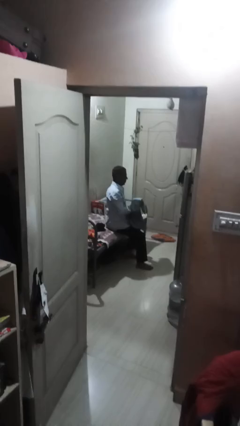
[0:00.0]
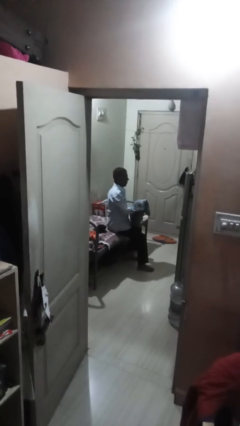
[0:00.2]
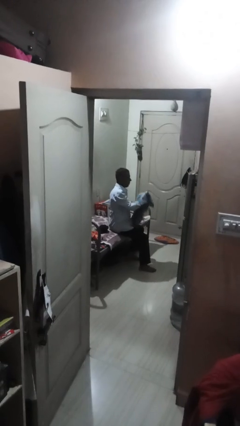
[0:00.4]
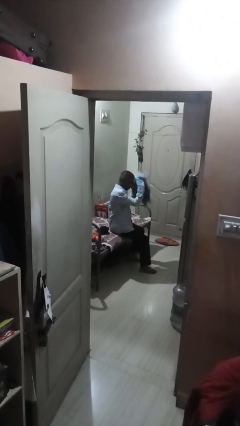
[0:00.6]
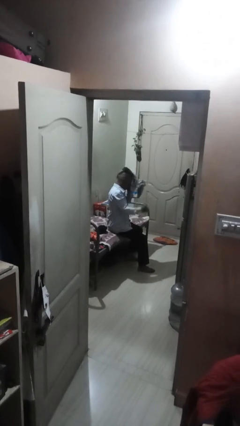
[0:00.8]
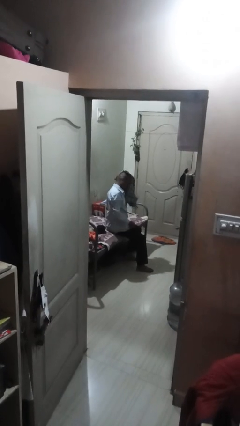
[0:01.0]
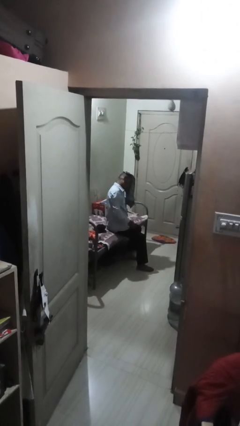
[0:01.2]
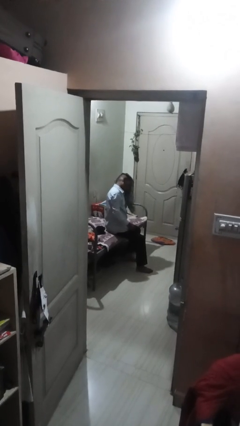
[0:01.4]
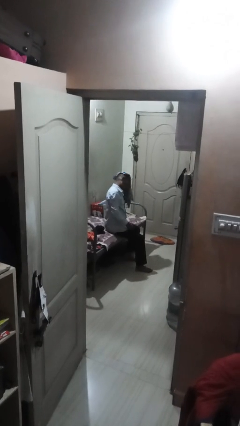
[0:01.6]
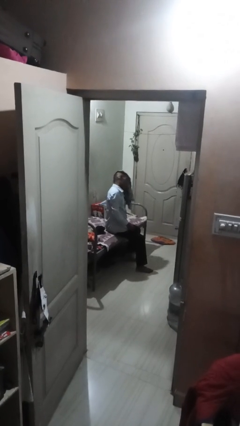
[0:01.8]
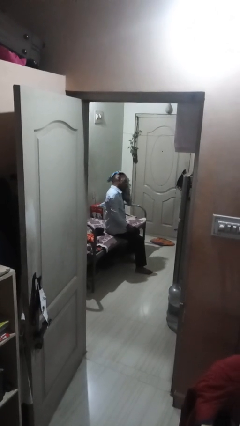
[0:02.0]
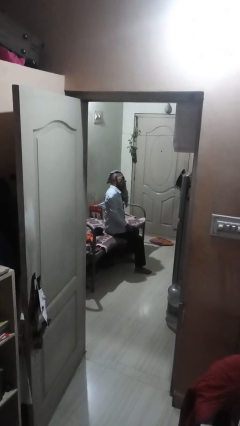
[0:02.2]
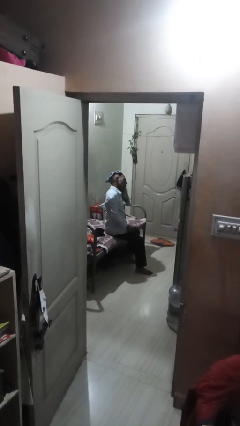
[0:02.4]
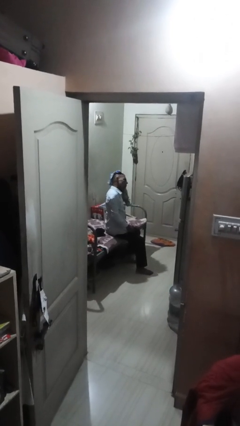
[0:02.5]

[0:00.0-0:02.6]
person gestures listen closely

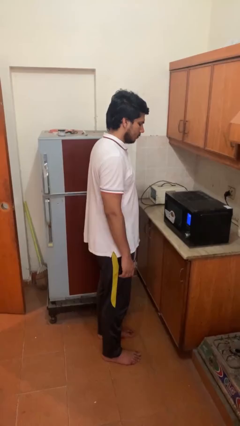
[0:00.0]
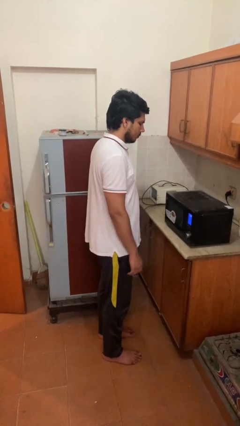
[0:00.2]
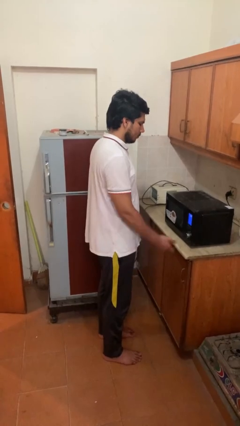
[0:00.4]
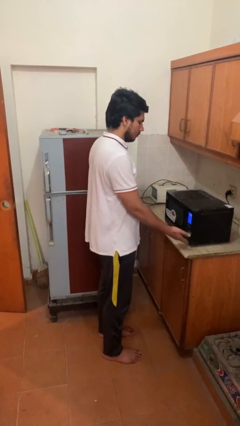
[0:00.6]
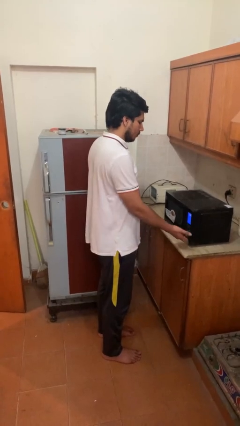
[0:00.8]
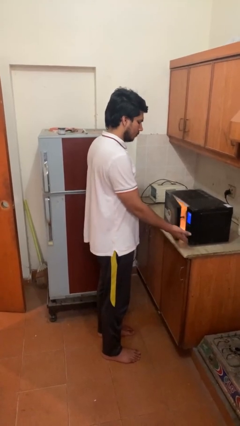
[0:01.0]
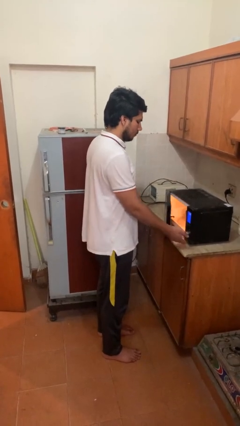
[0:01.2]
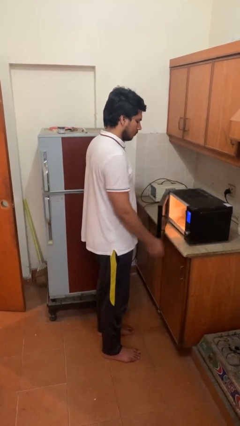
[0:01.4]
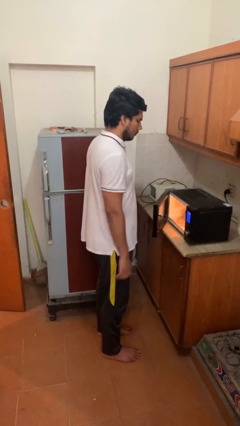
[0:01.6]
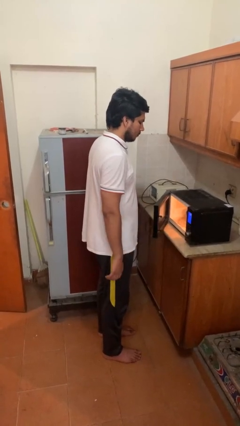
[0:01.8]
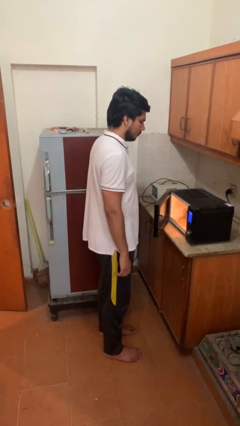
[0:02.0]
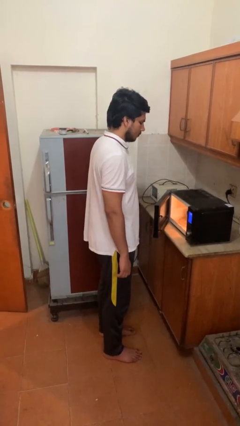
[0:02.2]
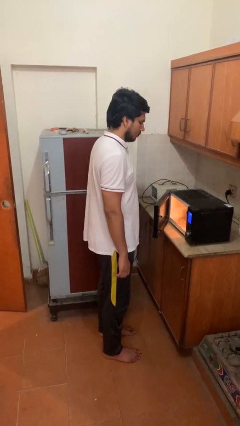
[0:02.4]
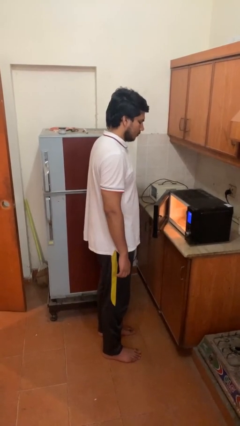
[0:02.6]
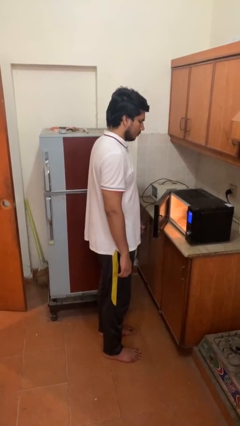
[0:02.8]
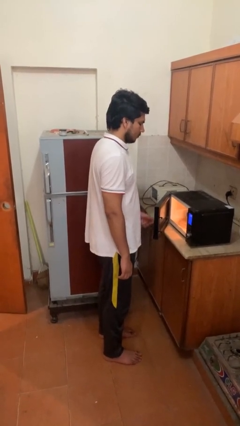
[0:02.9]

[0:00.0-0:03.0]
person opens microwave

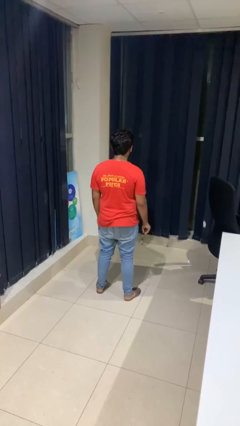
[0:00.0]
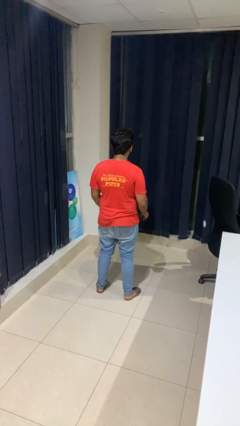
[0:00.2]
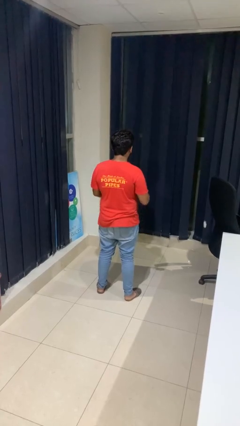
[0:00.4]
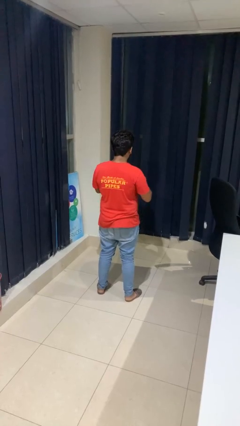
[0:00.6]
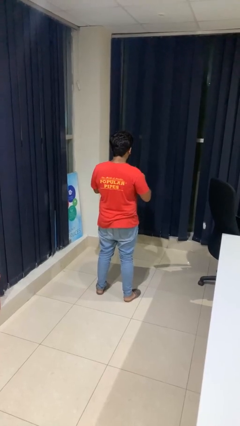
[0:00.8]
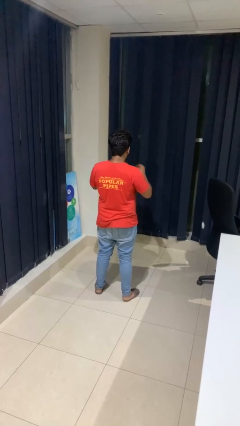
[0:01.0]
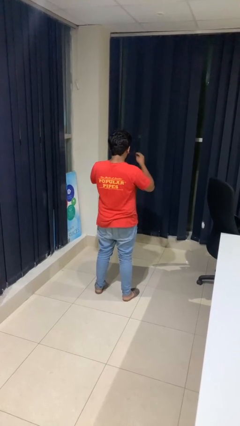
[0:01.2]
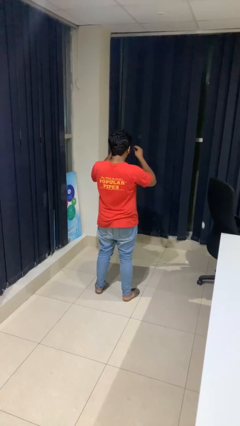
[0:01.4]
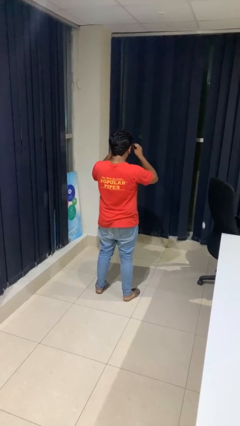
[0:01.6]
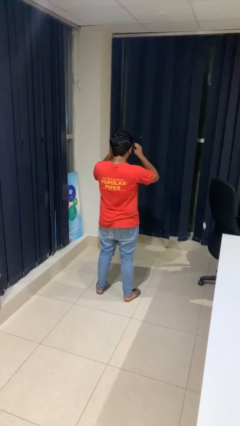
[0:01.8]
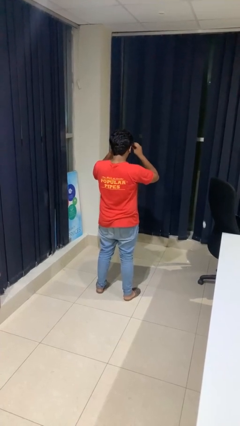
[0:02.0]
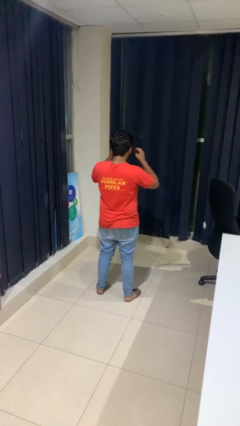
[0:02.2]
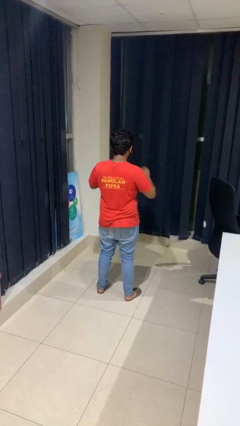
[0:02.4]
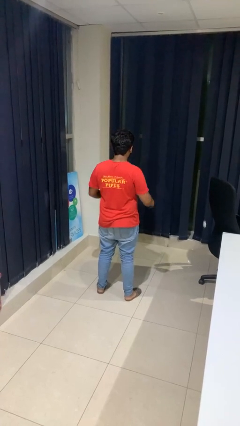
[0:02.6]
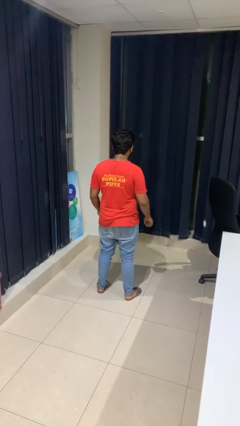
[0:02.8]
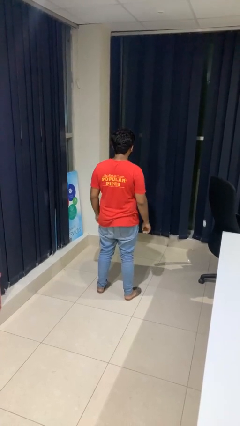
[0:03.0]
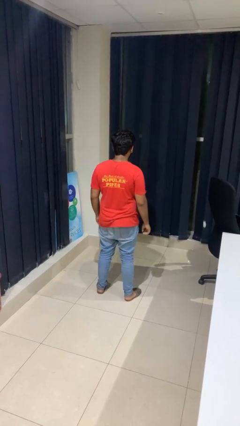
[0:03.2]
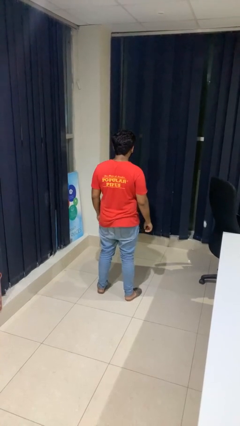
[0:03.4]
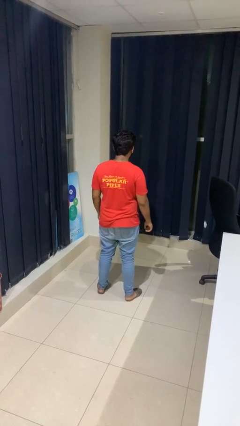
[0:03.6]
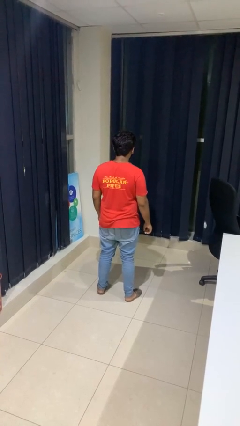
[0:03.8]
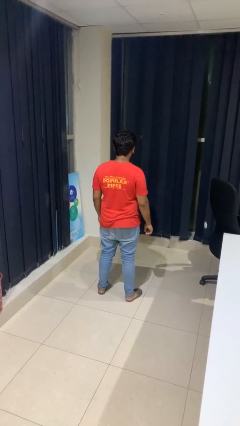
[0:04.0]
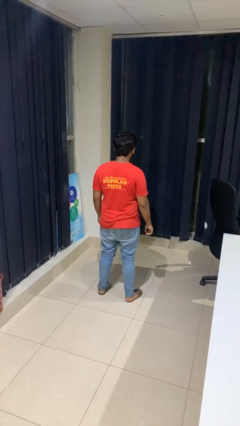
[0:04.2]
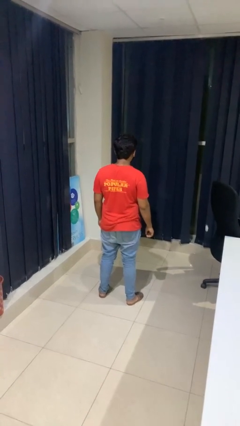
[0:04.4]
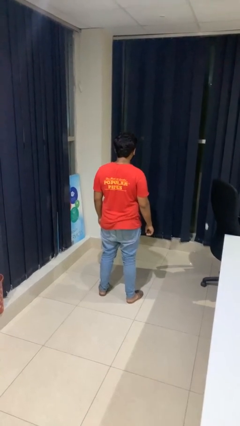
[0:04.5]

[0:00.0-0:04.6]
person puts on glasses

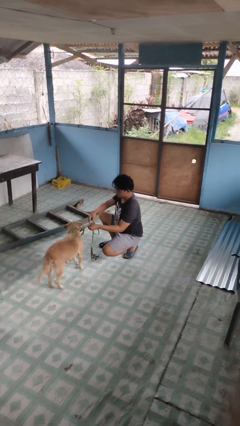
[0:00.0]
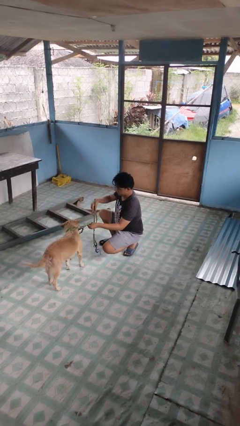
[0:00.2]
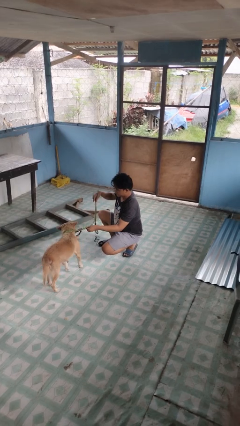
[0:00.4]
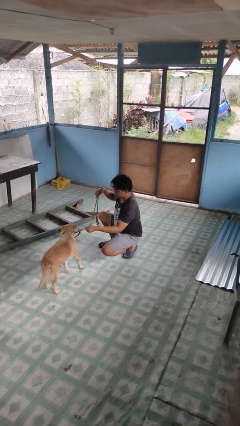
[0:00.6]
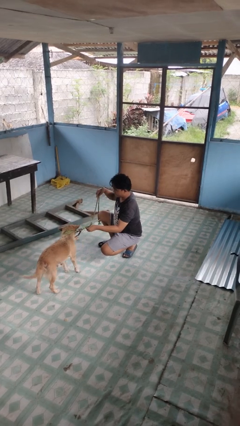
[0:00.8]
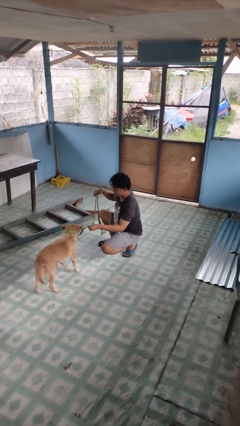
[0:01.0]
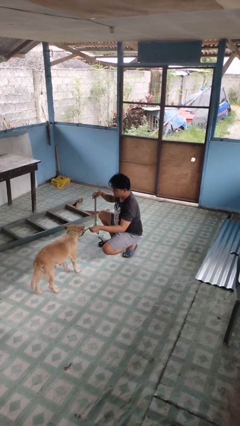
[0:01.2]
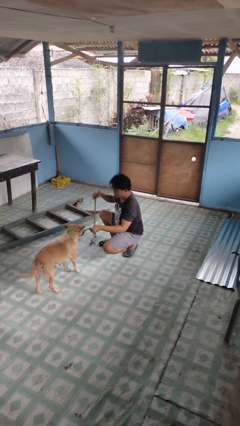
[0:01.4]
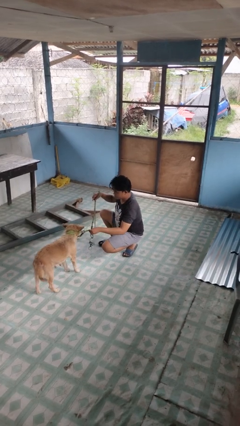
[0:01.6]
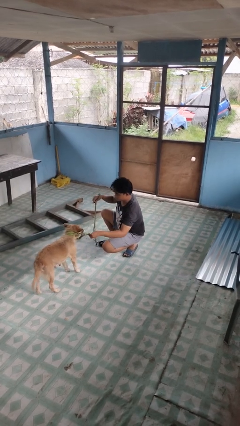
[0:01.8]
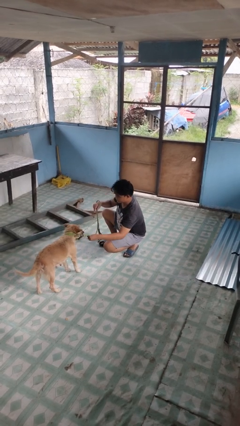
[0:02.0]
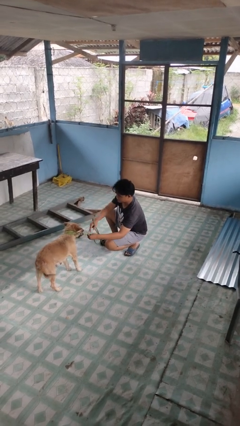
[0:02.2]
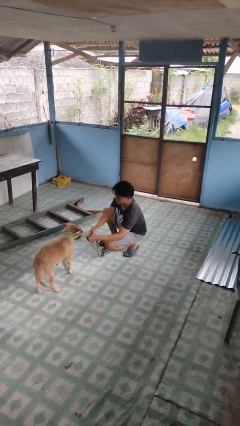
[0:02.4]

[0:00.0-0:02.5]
person attaches leash to dog

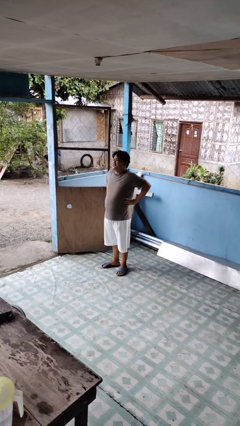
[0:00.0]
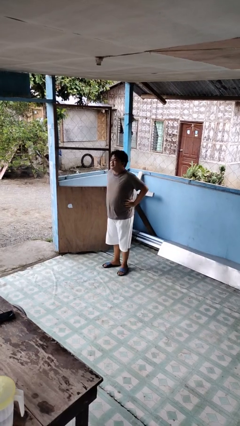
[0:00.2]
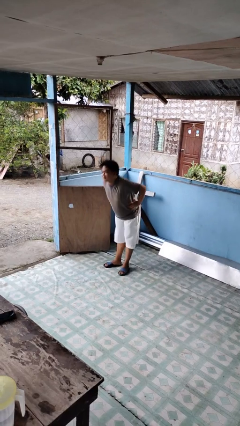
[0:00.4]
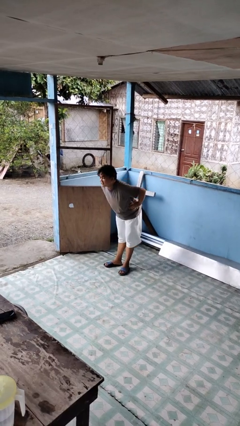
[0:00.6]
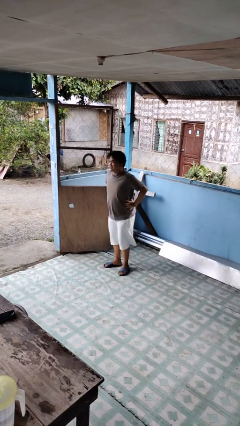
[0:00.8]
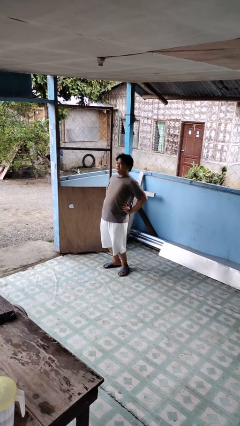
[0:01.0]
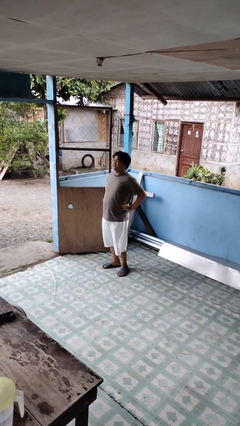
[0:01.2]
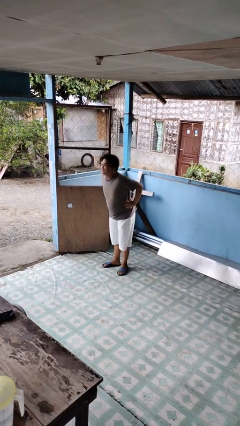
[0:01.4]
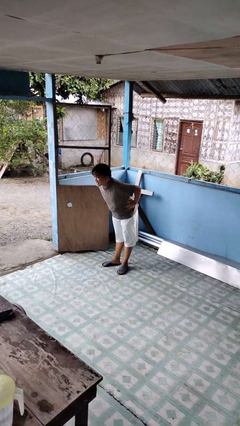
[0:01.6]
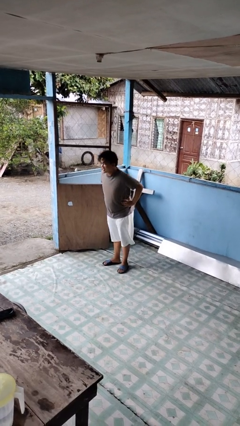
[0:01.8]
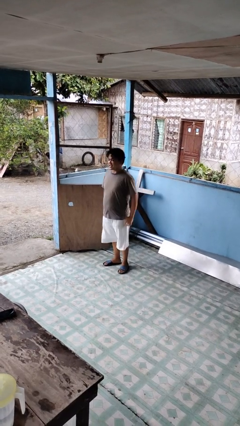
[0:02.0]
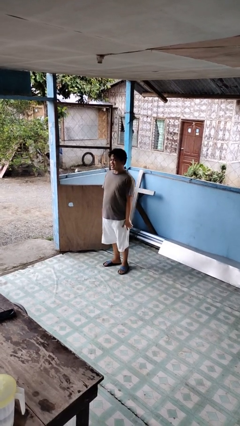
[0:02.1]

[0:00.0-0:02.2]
person wiggles hips

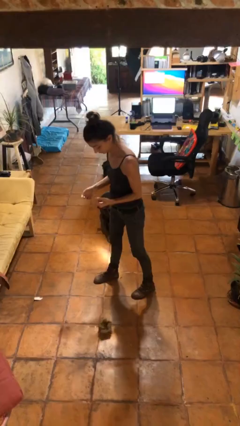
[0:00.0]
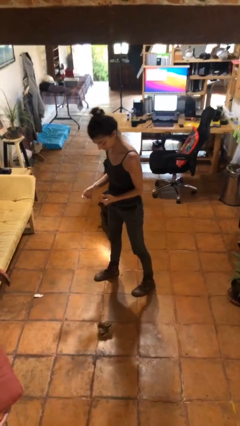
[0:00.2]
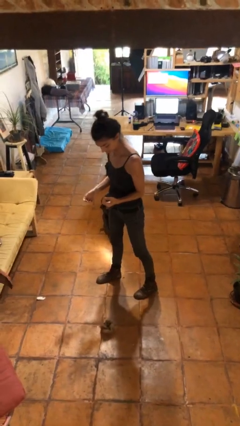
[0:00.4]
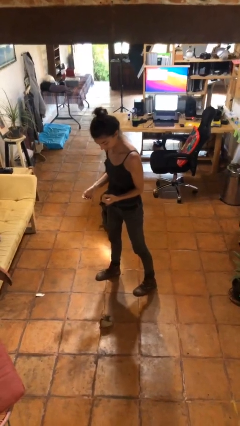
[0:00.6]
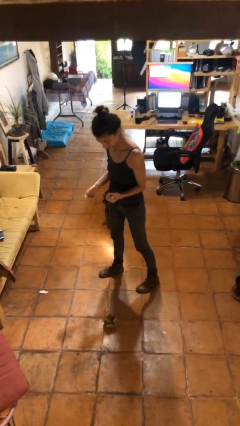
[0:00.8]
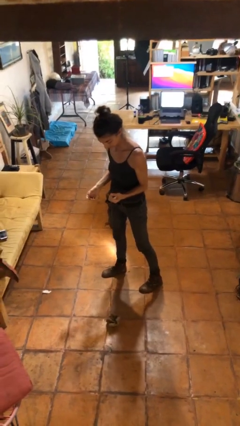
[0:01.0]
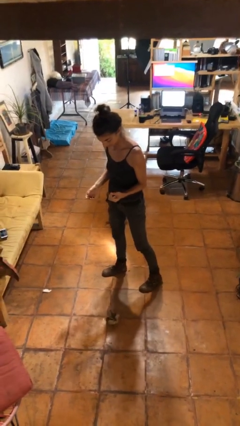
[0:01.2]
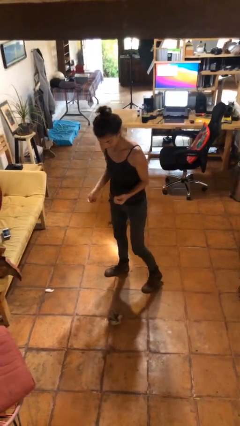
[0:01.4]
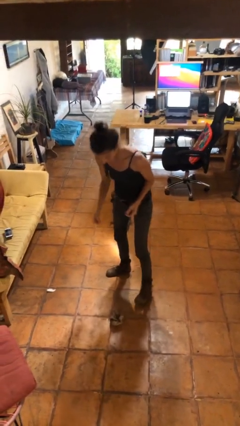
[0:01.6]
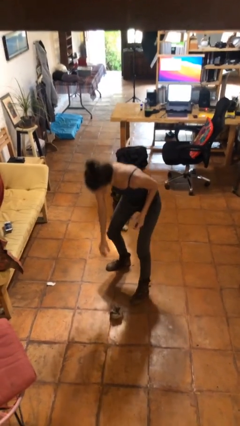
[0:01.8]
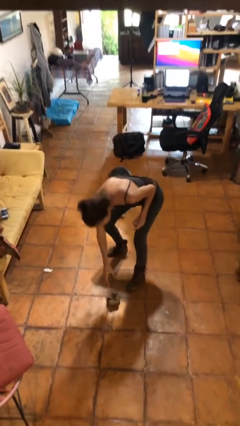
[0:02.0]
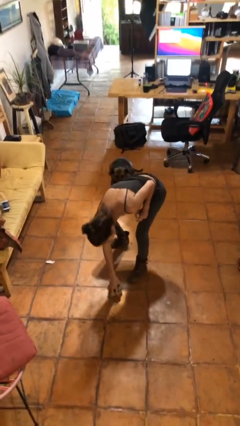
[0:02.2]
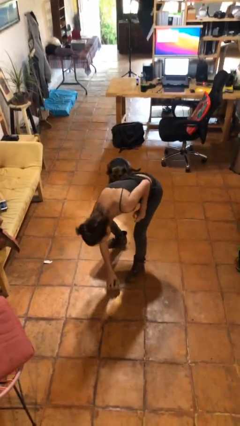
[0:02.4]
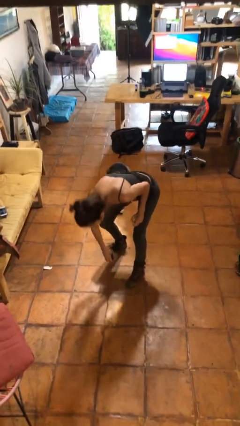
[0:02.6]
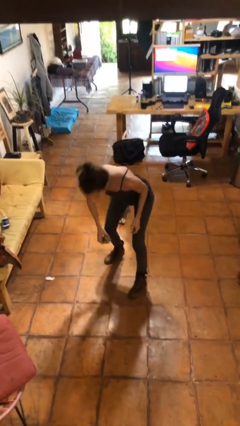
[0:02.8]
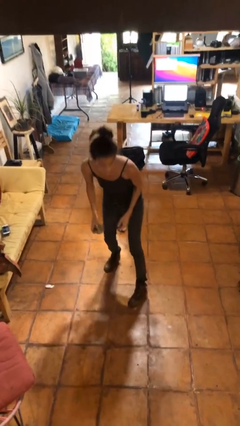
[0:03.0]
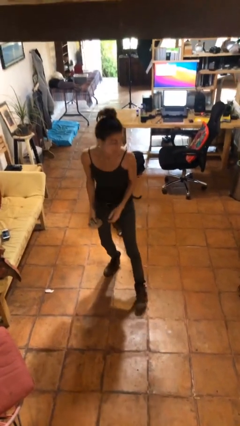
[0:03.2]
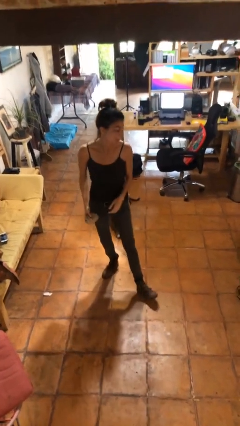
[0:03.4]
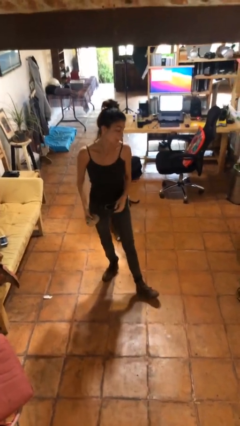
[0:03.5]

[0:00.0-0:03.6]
person picks up object from floor
